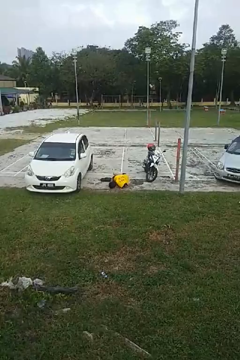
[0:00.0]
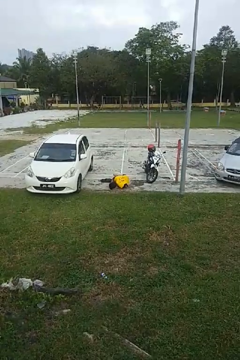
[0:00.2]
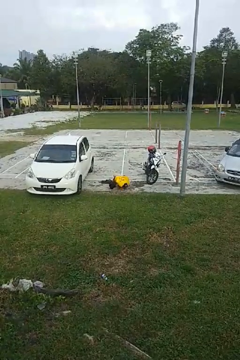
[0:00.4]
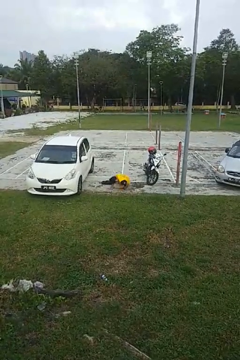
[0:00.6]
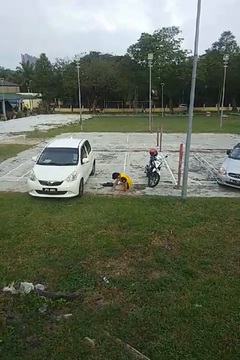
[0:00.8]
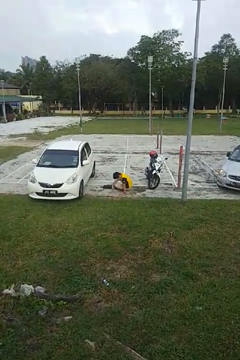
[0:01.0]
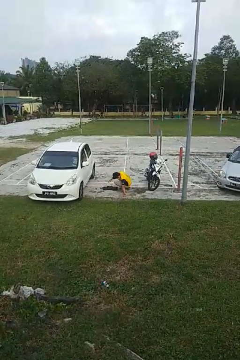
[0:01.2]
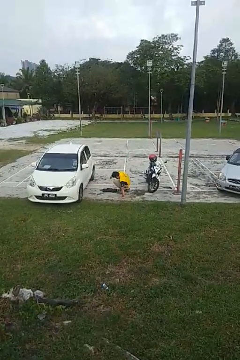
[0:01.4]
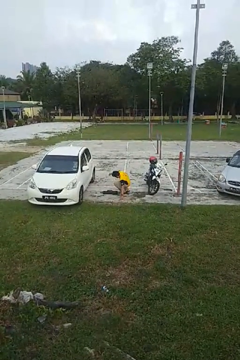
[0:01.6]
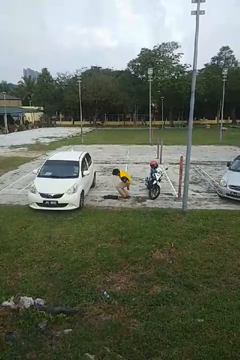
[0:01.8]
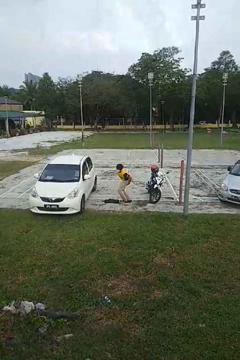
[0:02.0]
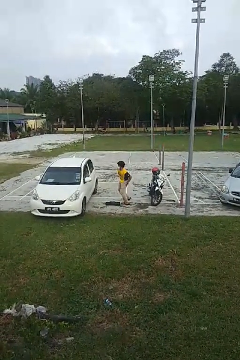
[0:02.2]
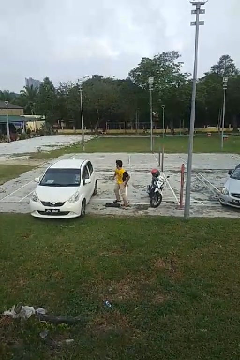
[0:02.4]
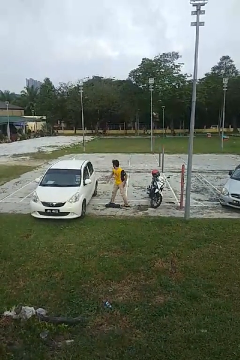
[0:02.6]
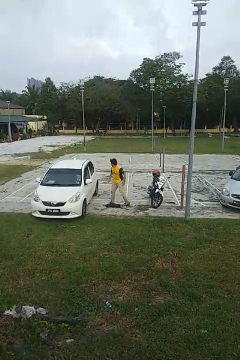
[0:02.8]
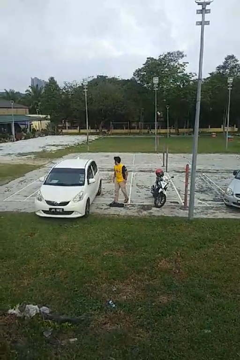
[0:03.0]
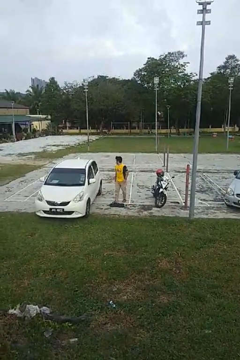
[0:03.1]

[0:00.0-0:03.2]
person stands up from floor

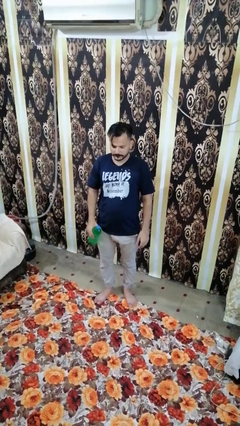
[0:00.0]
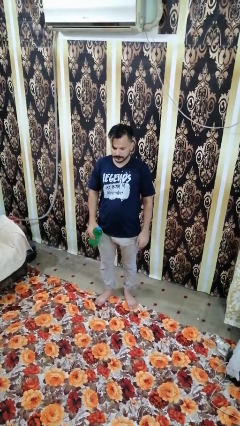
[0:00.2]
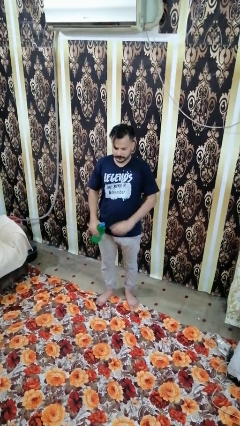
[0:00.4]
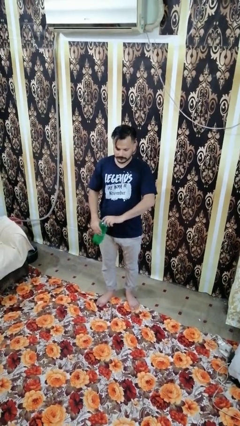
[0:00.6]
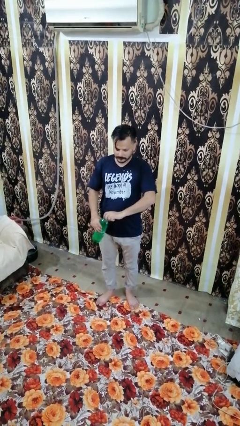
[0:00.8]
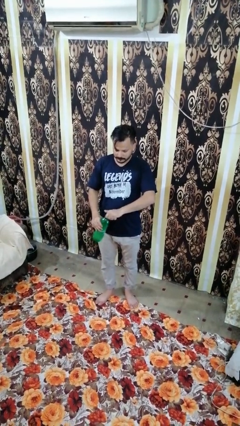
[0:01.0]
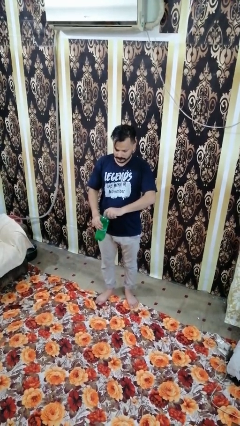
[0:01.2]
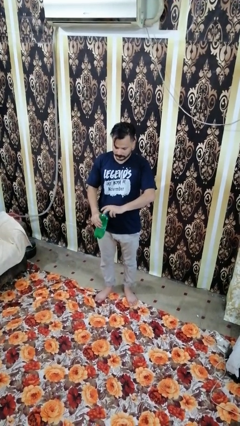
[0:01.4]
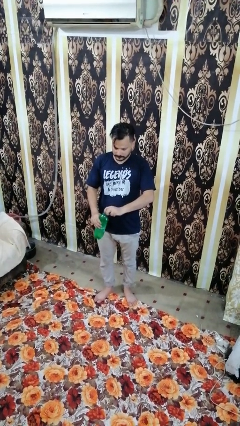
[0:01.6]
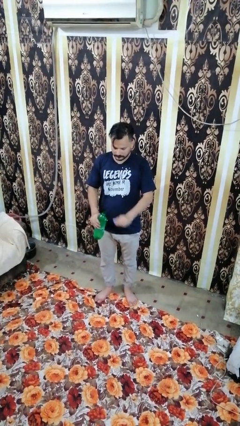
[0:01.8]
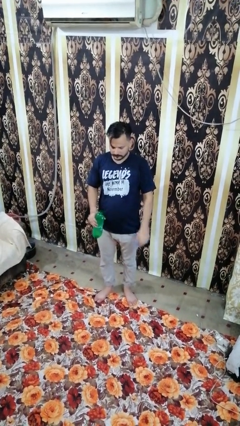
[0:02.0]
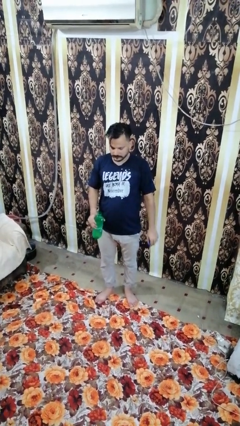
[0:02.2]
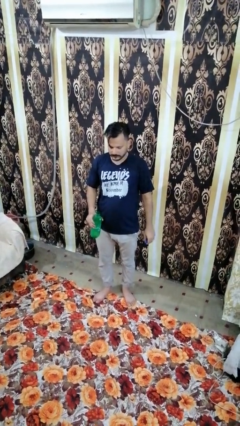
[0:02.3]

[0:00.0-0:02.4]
person opens beverage can

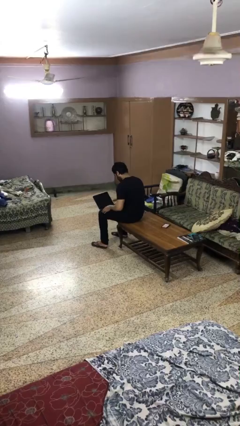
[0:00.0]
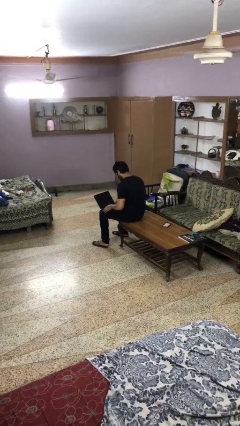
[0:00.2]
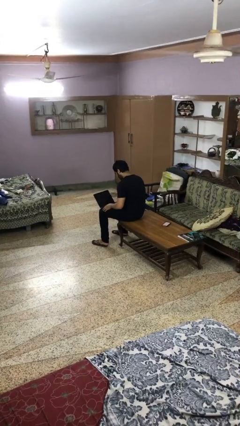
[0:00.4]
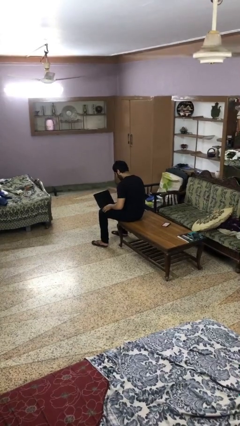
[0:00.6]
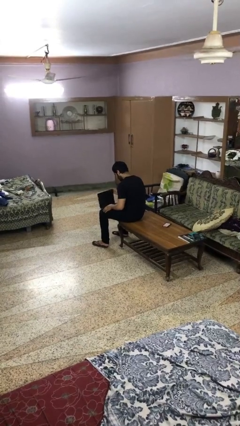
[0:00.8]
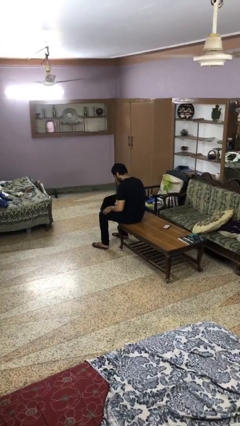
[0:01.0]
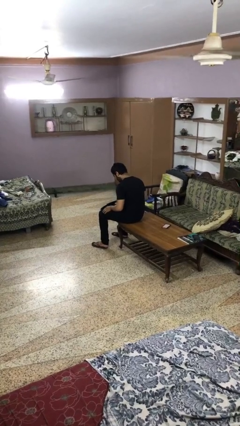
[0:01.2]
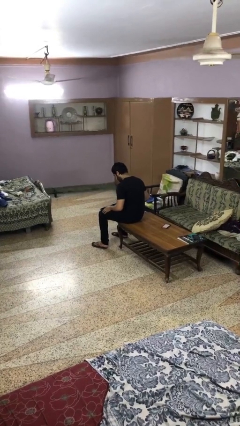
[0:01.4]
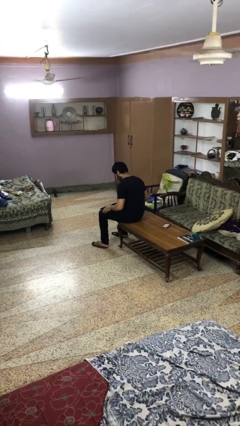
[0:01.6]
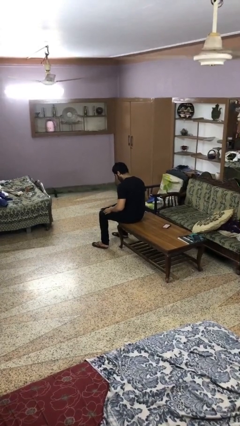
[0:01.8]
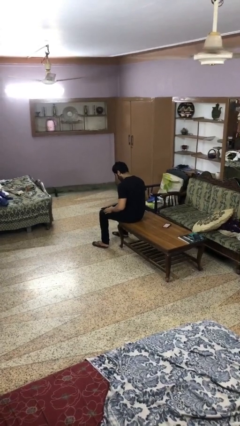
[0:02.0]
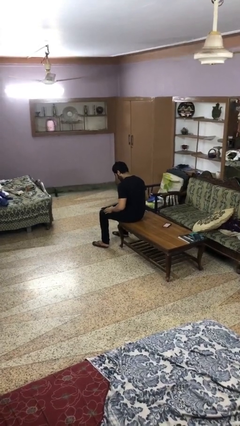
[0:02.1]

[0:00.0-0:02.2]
person closes laptop

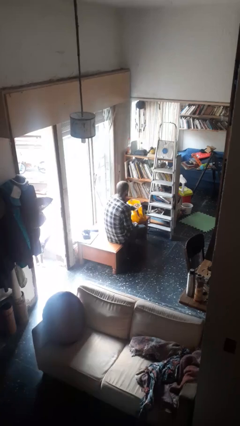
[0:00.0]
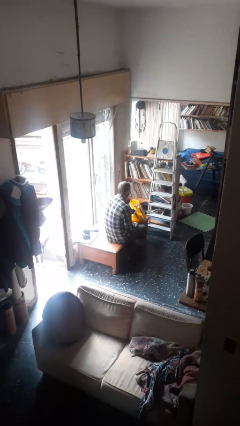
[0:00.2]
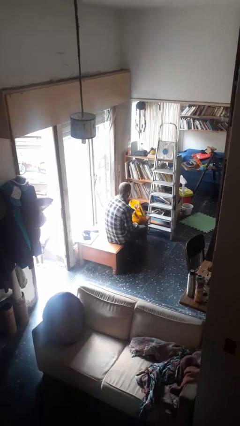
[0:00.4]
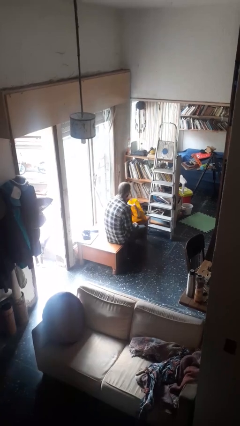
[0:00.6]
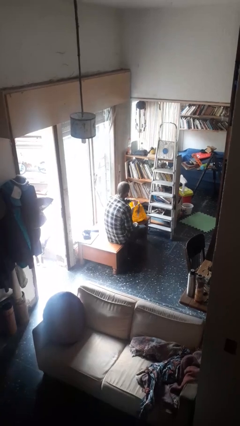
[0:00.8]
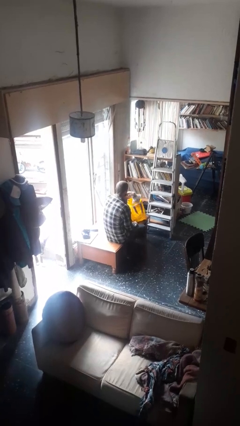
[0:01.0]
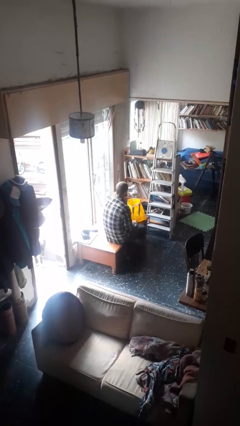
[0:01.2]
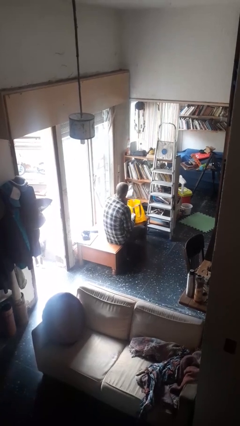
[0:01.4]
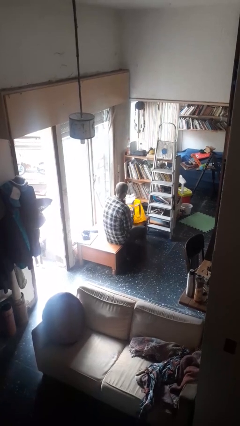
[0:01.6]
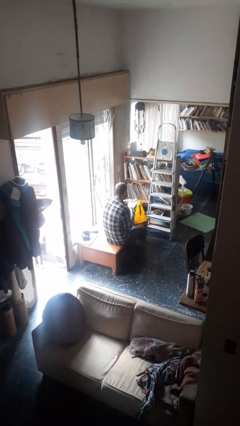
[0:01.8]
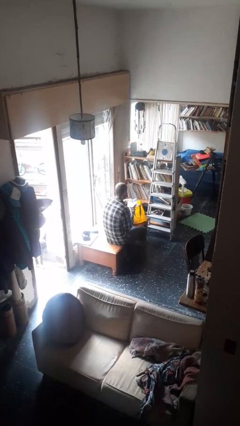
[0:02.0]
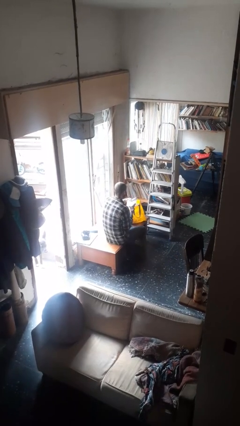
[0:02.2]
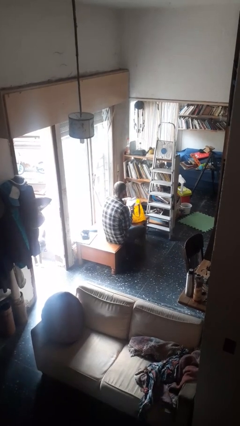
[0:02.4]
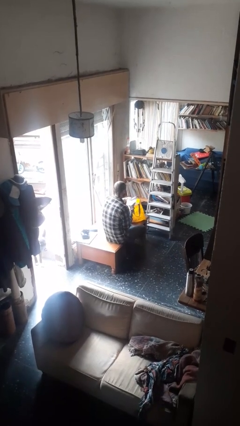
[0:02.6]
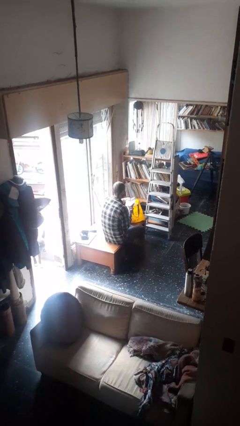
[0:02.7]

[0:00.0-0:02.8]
person takes object from bag

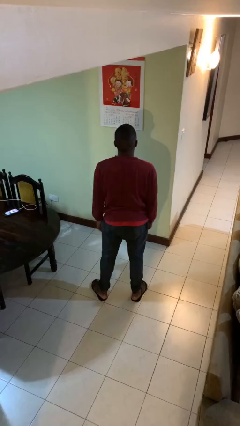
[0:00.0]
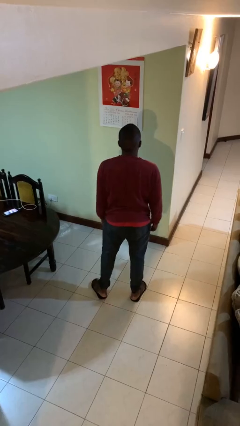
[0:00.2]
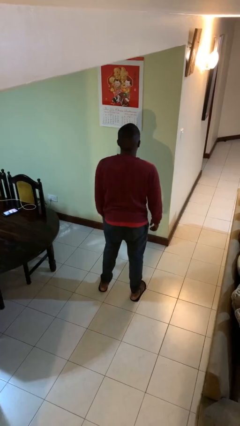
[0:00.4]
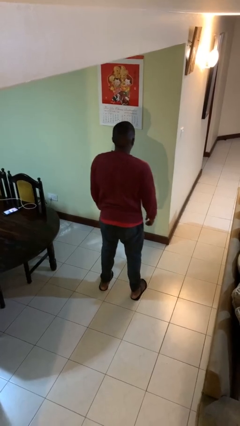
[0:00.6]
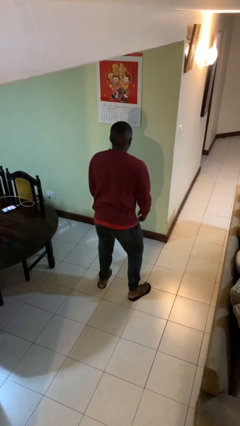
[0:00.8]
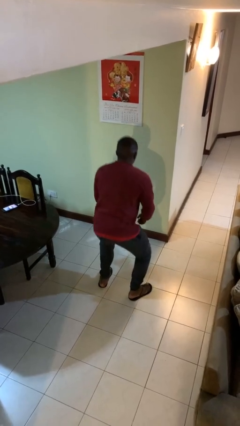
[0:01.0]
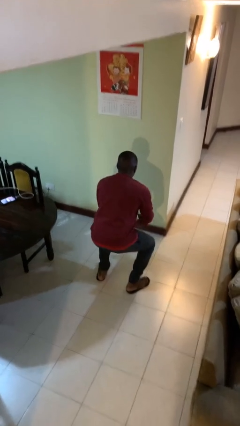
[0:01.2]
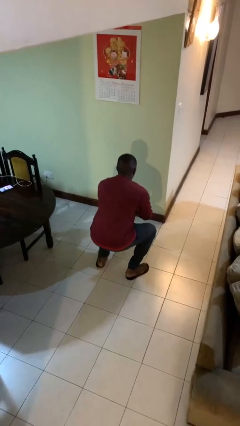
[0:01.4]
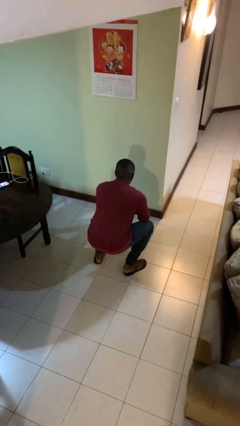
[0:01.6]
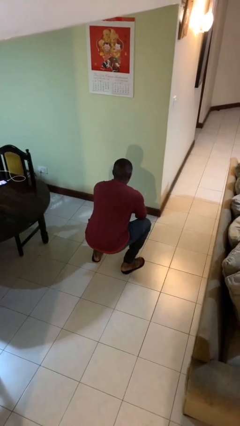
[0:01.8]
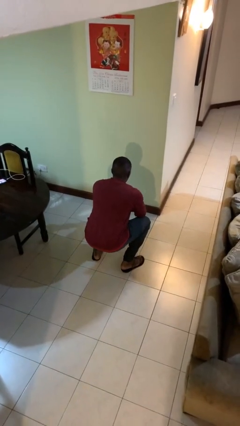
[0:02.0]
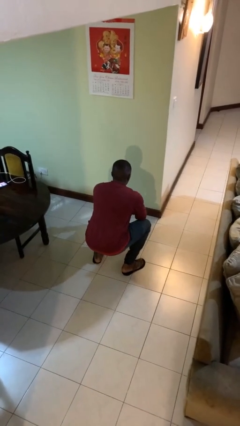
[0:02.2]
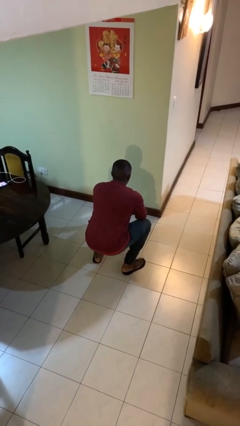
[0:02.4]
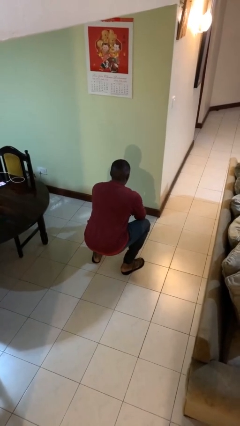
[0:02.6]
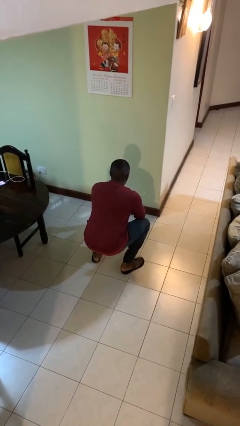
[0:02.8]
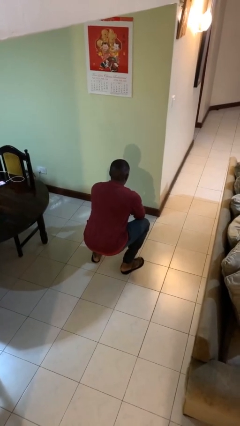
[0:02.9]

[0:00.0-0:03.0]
person squats

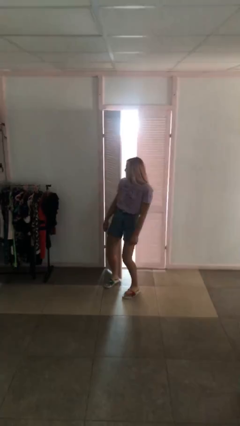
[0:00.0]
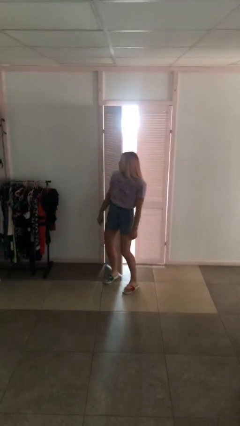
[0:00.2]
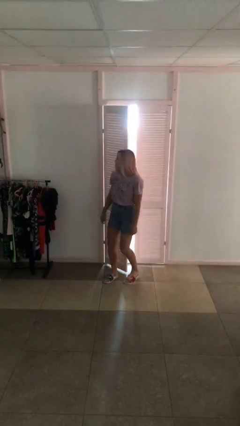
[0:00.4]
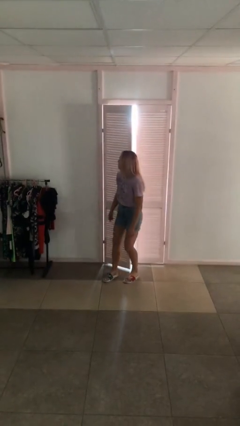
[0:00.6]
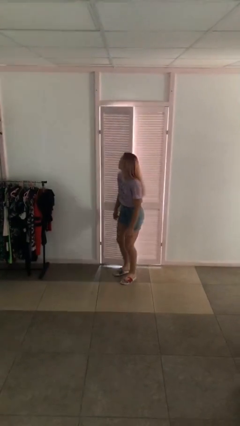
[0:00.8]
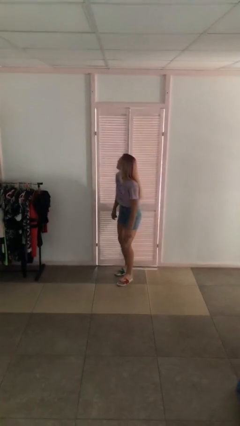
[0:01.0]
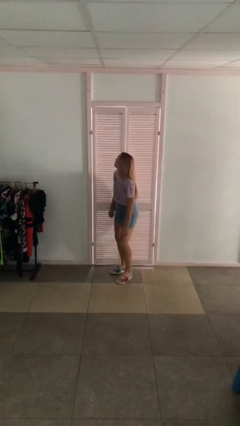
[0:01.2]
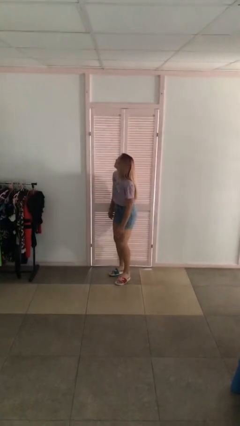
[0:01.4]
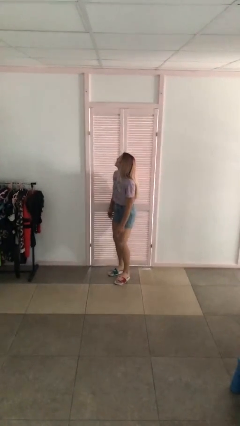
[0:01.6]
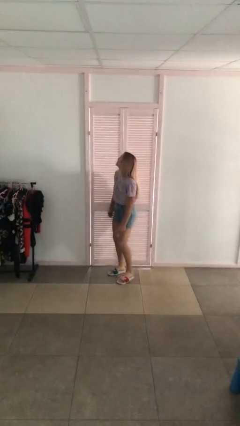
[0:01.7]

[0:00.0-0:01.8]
person closes door with hip

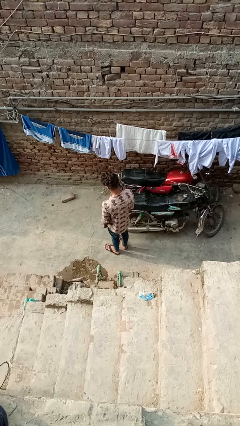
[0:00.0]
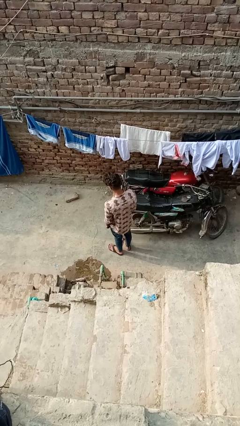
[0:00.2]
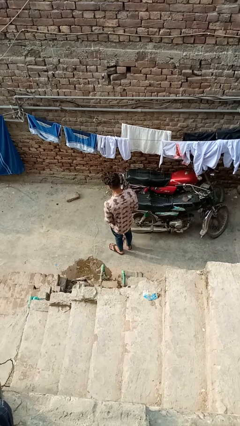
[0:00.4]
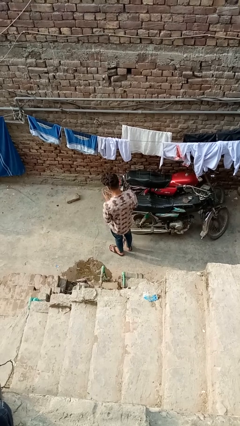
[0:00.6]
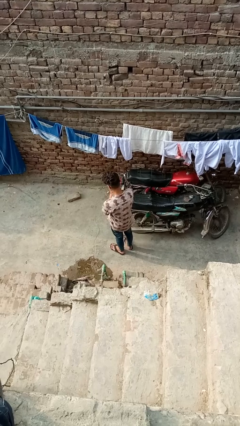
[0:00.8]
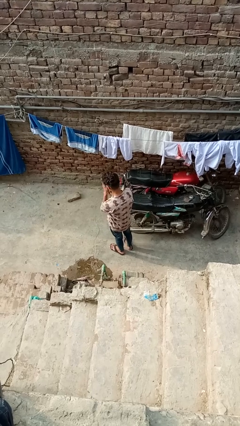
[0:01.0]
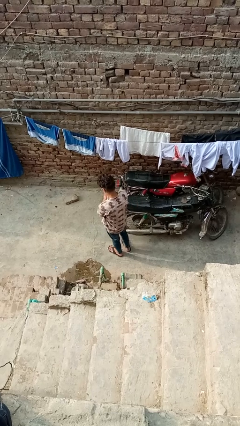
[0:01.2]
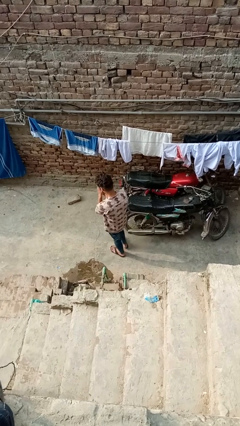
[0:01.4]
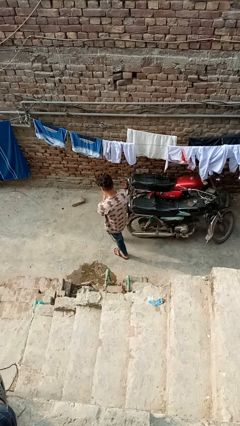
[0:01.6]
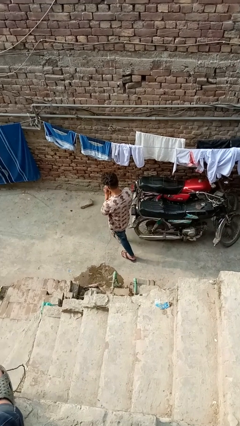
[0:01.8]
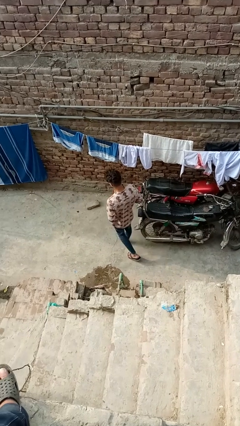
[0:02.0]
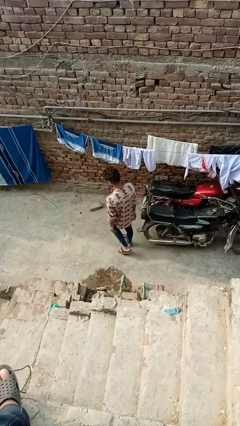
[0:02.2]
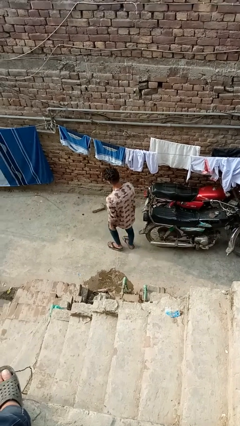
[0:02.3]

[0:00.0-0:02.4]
person blows into hands
